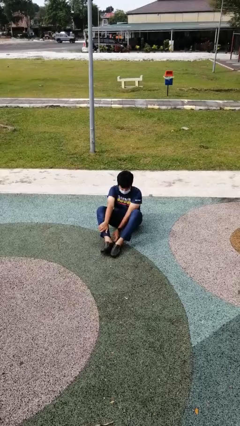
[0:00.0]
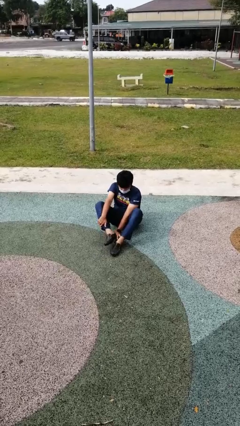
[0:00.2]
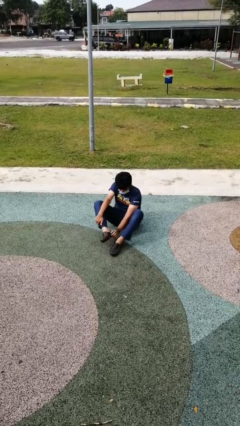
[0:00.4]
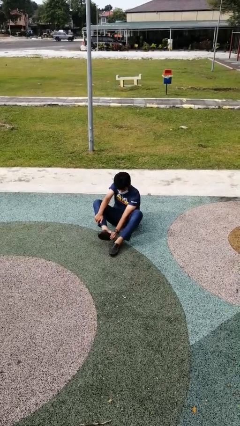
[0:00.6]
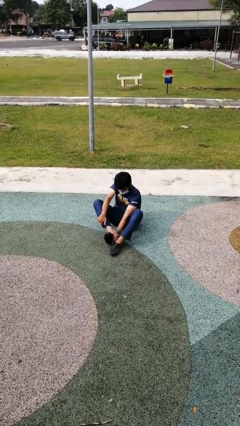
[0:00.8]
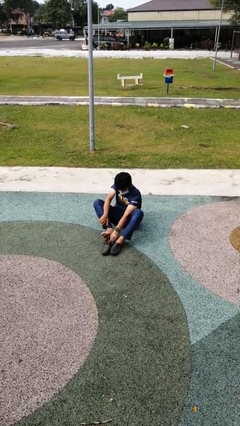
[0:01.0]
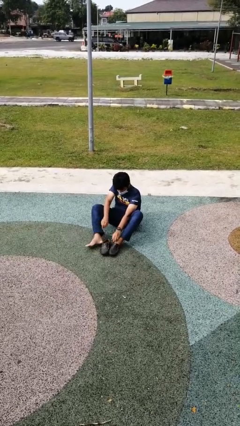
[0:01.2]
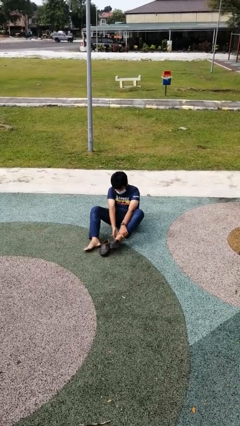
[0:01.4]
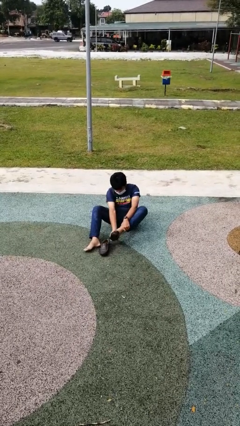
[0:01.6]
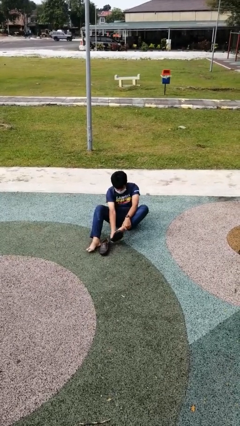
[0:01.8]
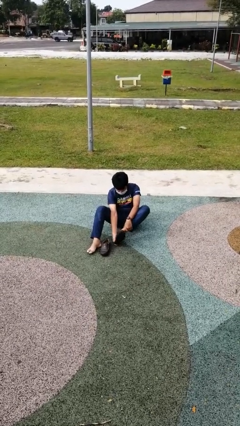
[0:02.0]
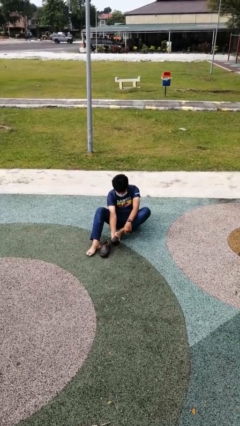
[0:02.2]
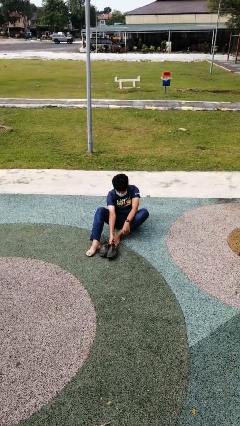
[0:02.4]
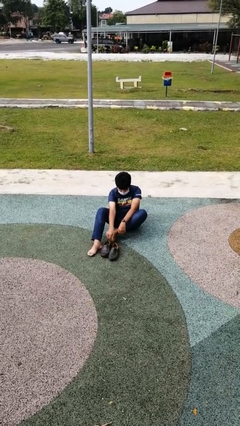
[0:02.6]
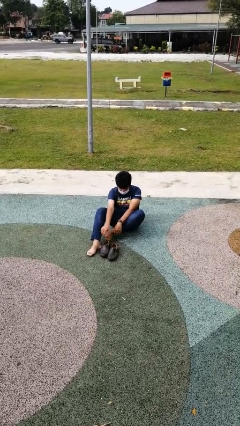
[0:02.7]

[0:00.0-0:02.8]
person takes off shoes

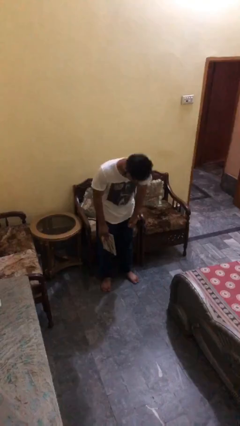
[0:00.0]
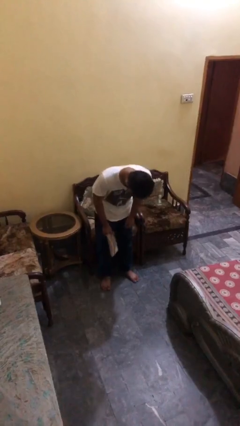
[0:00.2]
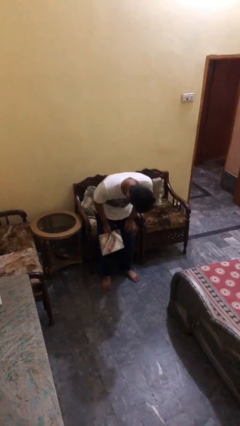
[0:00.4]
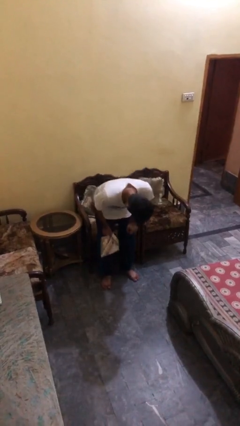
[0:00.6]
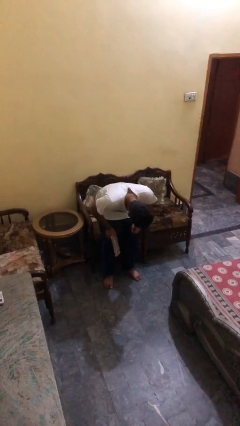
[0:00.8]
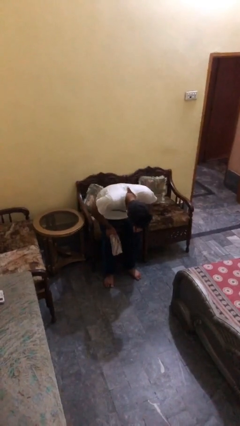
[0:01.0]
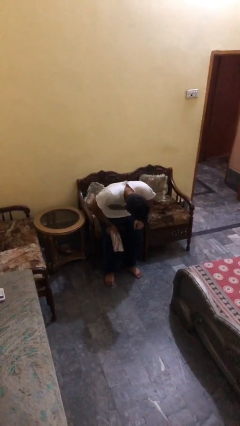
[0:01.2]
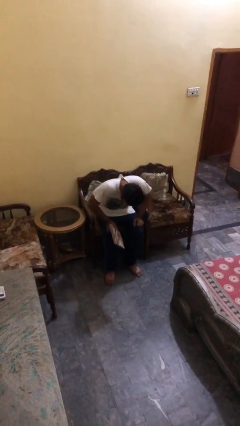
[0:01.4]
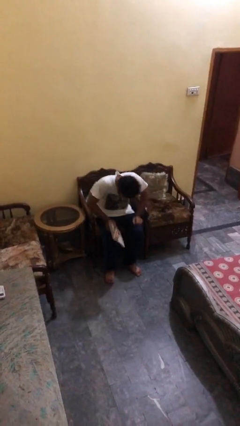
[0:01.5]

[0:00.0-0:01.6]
person sits down

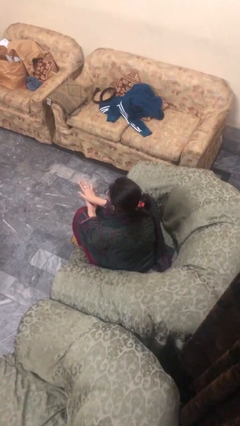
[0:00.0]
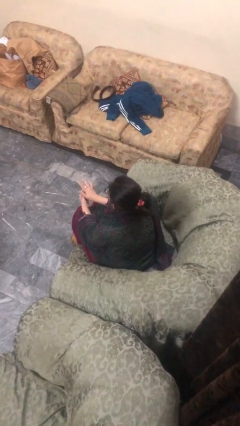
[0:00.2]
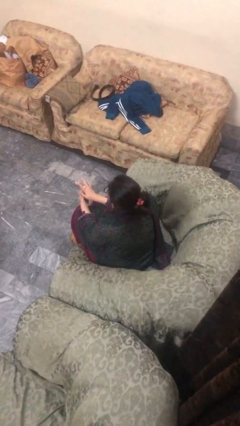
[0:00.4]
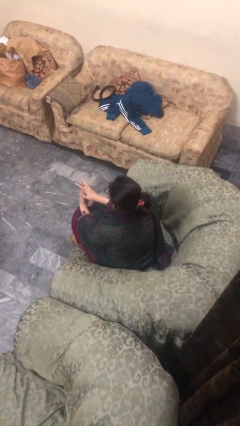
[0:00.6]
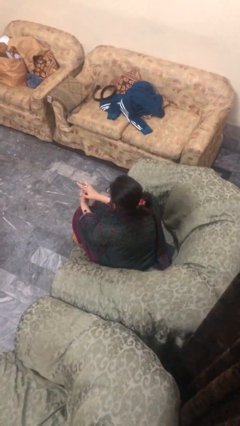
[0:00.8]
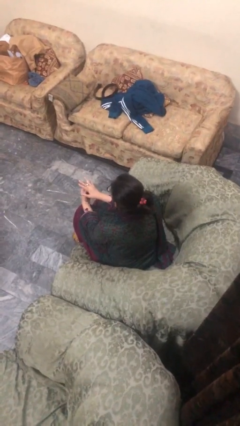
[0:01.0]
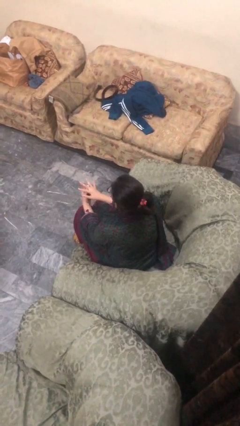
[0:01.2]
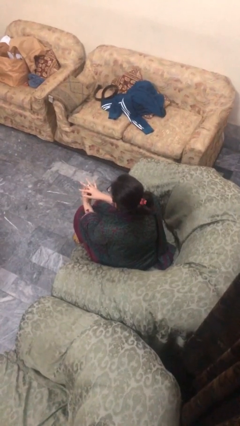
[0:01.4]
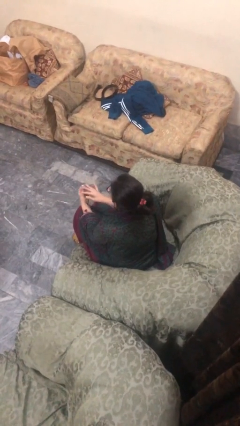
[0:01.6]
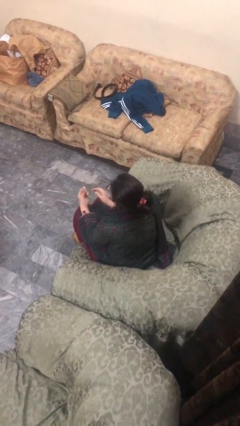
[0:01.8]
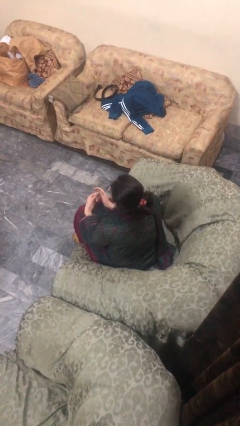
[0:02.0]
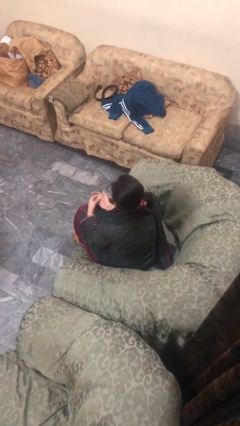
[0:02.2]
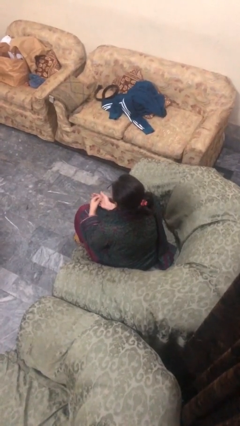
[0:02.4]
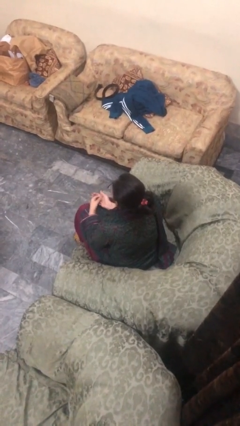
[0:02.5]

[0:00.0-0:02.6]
person takes off ring

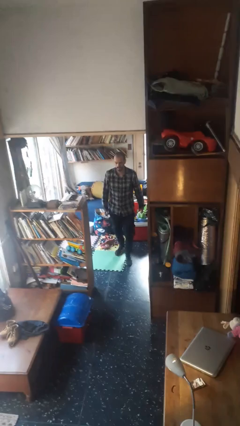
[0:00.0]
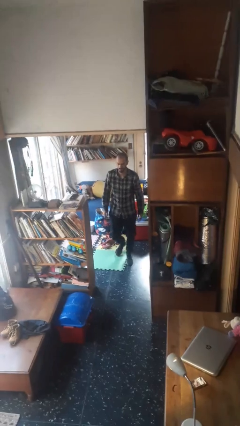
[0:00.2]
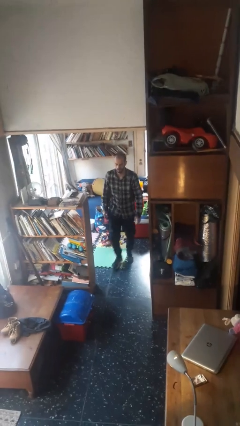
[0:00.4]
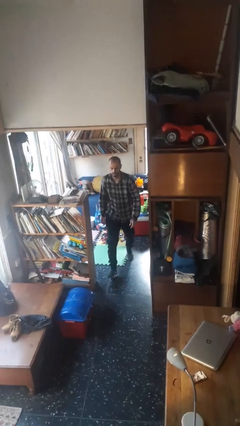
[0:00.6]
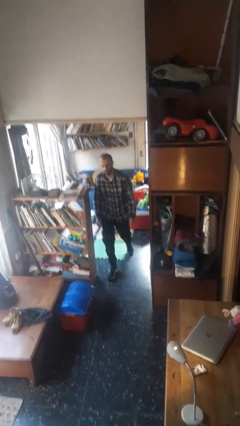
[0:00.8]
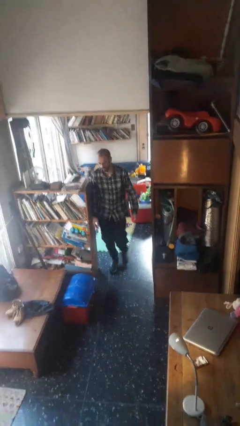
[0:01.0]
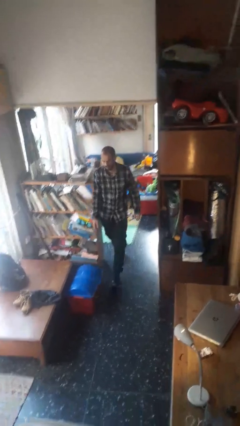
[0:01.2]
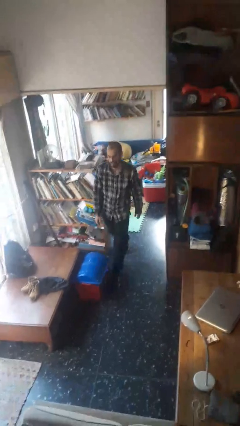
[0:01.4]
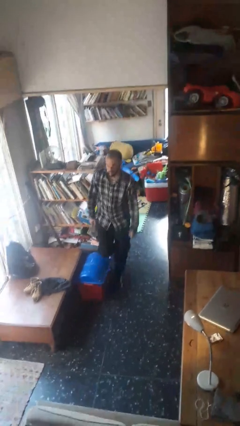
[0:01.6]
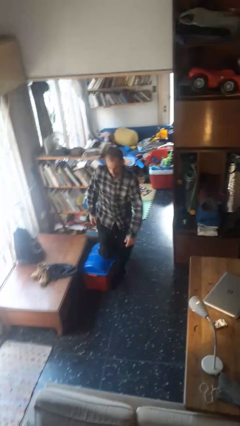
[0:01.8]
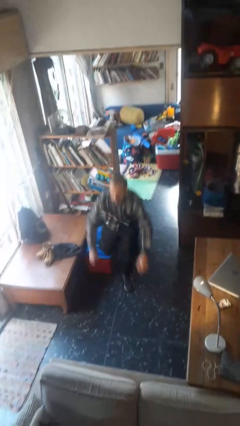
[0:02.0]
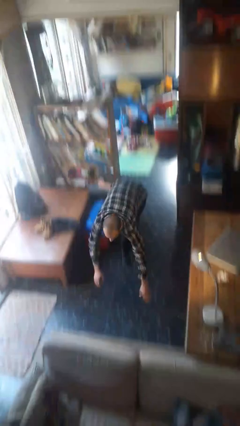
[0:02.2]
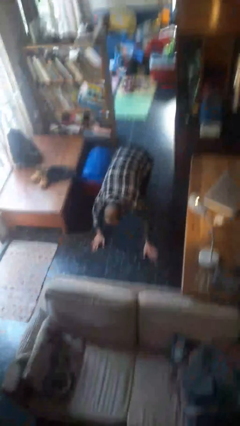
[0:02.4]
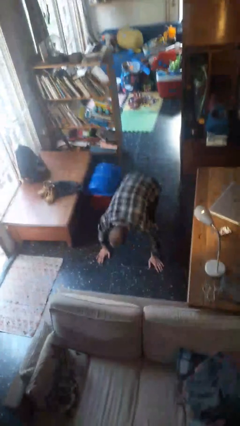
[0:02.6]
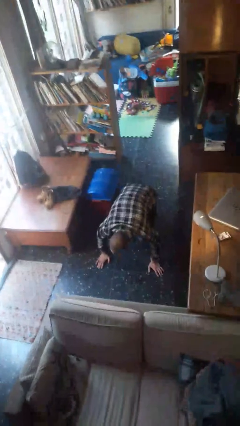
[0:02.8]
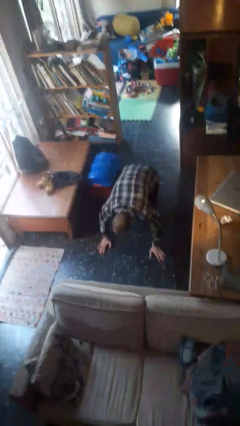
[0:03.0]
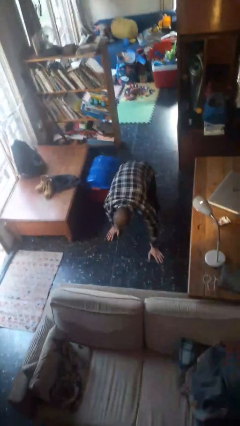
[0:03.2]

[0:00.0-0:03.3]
person trips on object on floor

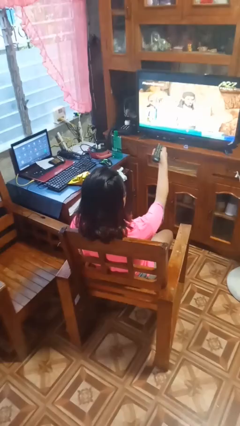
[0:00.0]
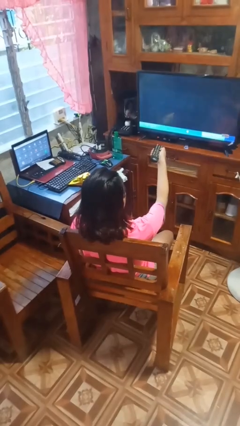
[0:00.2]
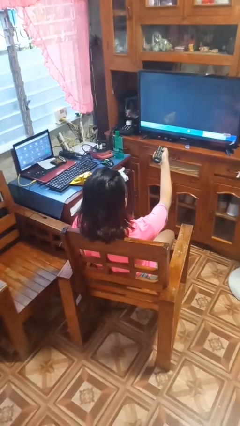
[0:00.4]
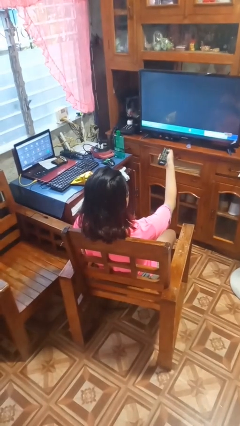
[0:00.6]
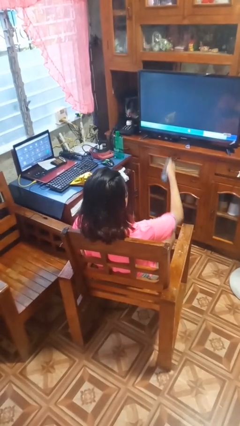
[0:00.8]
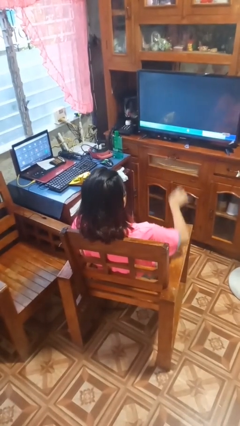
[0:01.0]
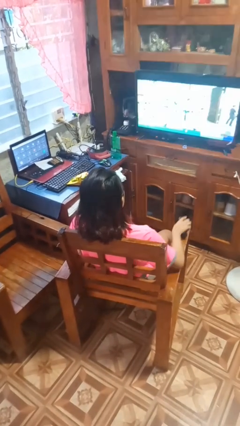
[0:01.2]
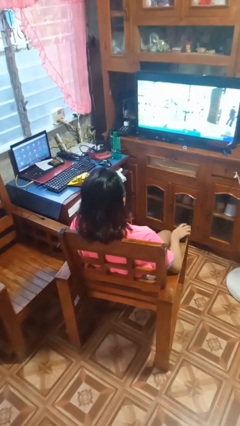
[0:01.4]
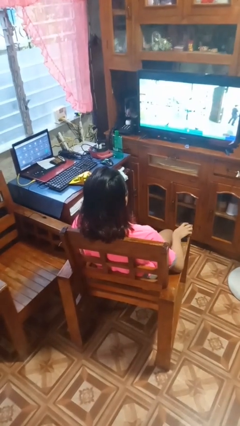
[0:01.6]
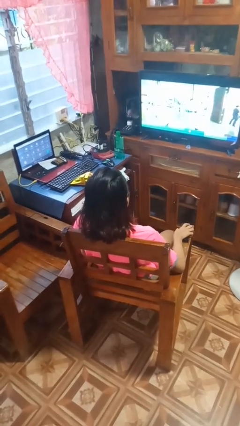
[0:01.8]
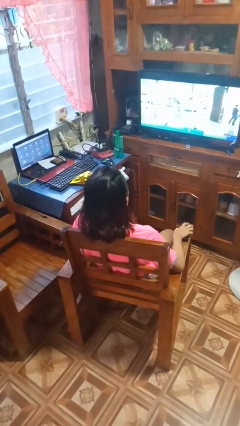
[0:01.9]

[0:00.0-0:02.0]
person uses television remote

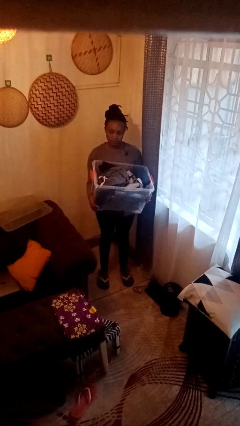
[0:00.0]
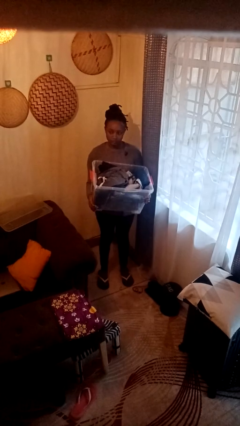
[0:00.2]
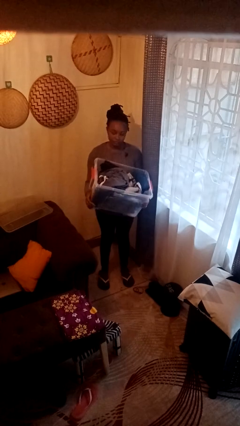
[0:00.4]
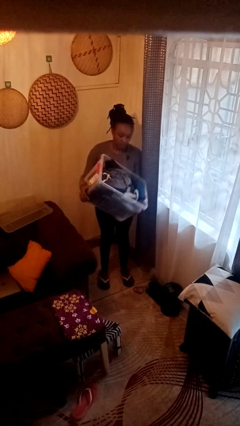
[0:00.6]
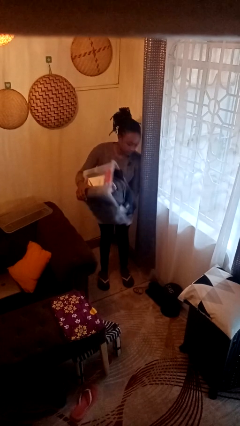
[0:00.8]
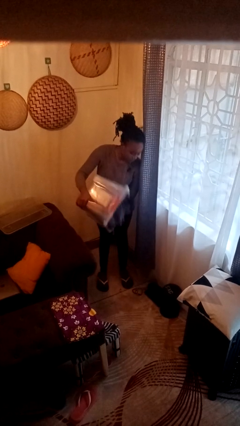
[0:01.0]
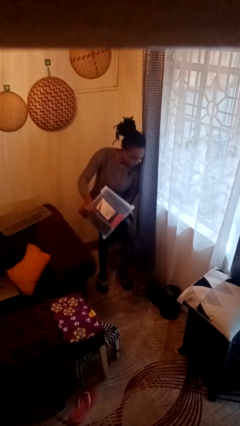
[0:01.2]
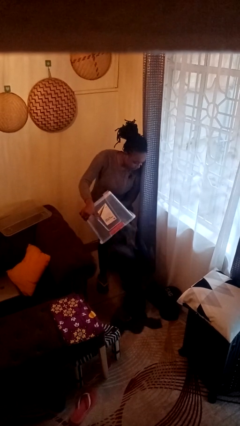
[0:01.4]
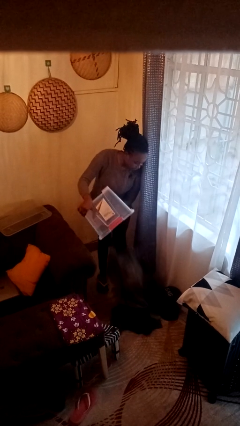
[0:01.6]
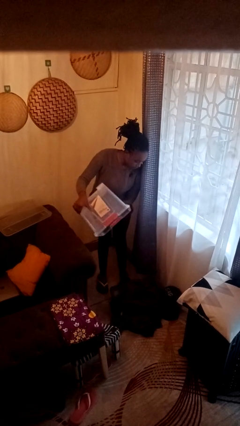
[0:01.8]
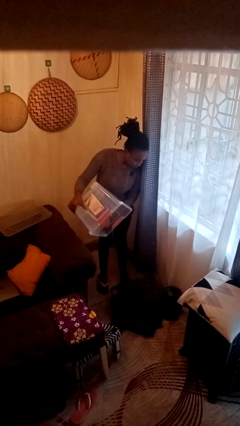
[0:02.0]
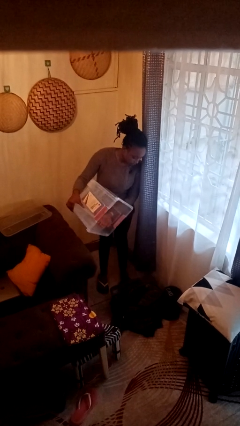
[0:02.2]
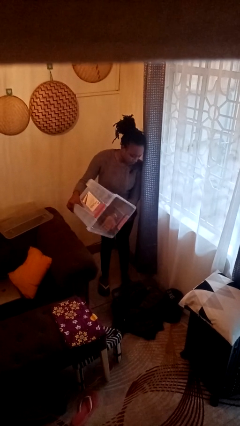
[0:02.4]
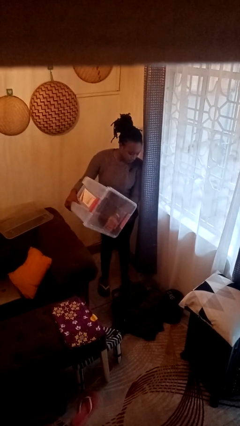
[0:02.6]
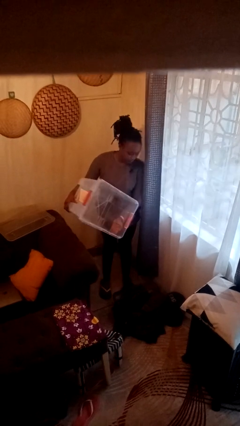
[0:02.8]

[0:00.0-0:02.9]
person unloads box onto floor

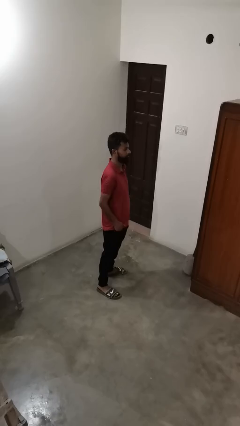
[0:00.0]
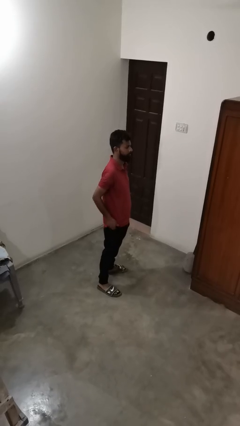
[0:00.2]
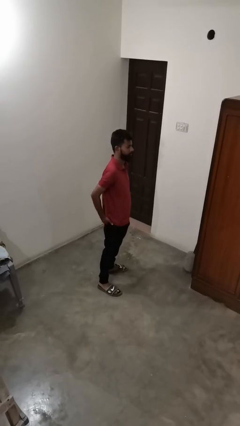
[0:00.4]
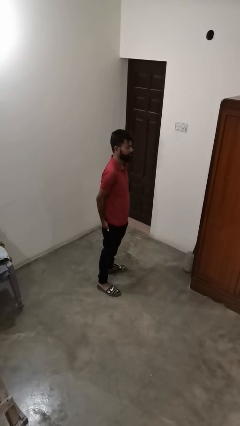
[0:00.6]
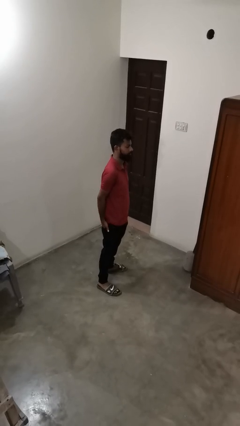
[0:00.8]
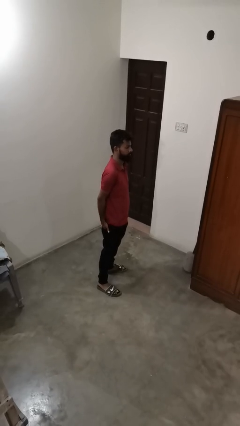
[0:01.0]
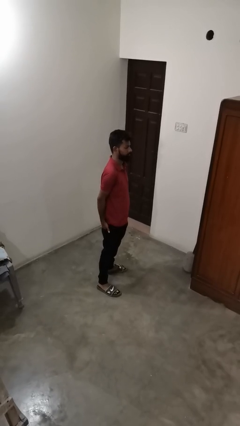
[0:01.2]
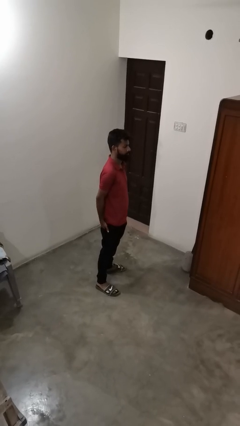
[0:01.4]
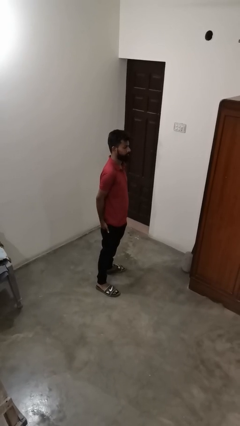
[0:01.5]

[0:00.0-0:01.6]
person puts hands in back pockets

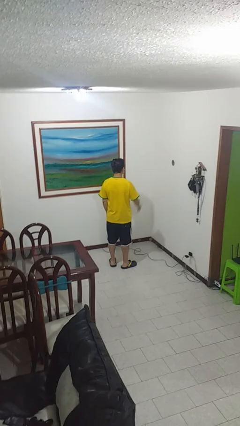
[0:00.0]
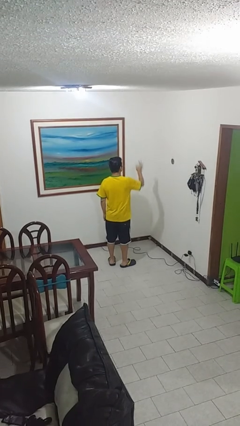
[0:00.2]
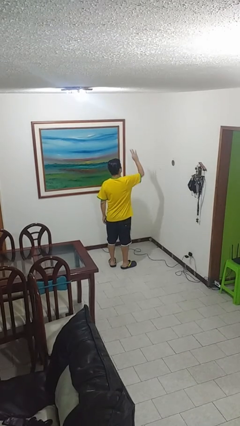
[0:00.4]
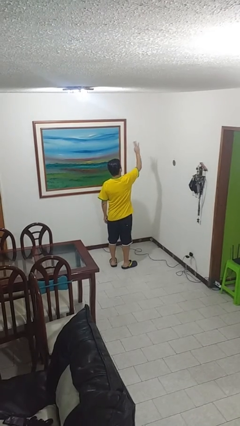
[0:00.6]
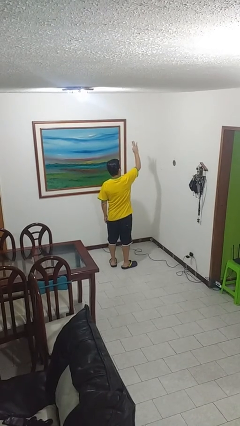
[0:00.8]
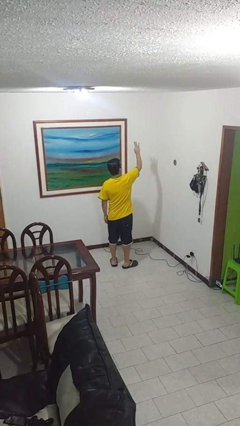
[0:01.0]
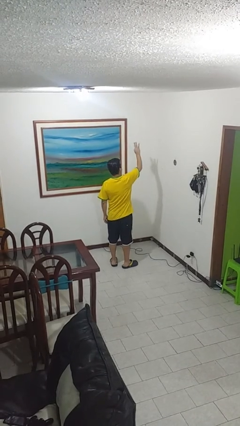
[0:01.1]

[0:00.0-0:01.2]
person gestures number three
